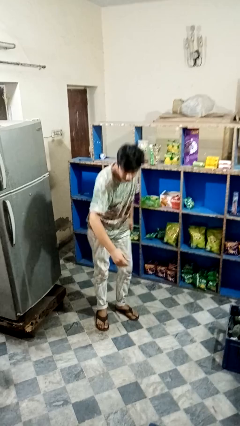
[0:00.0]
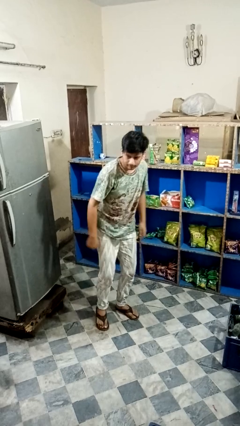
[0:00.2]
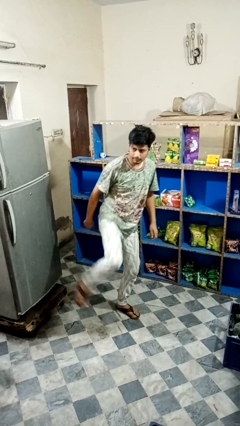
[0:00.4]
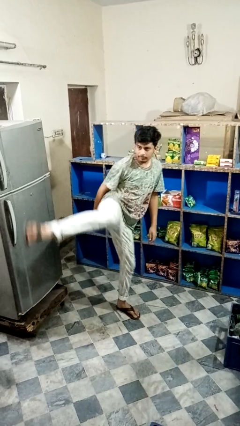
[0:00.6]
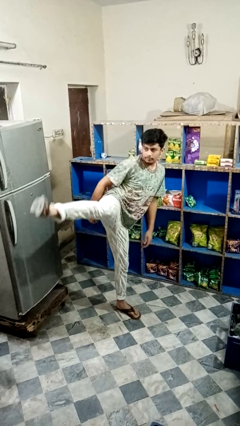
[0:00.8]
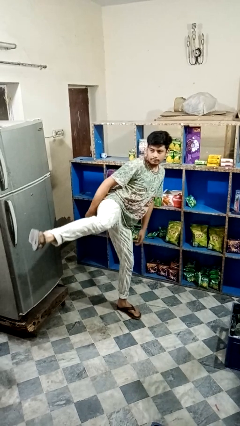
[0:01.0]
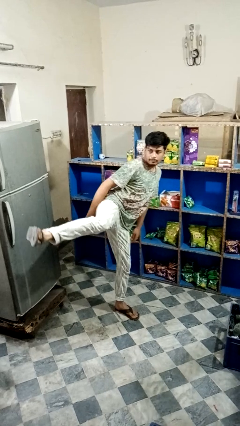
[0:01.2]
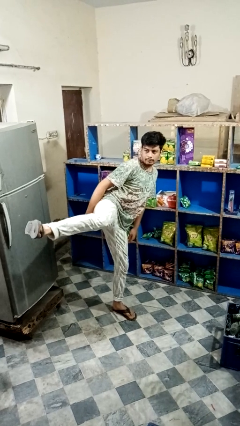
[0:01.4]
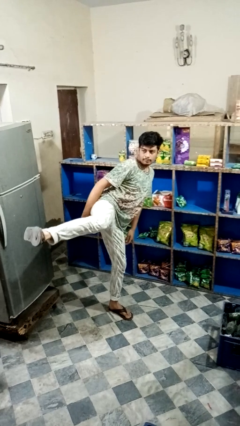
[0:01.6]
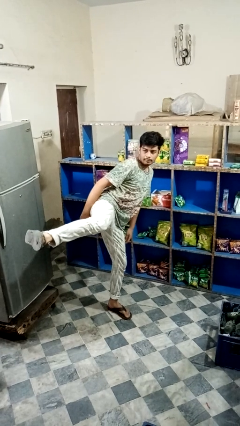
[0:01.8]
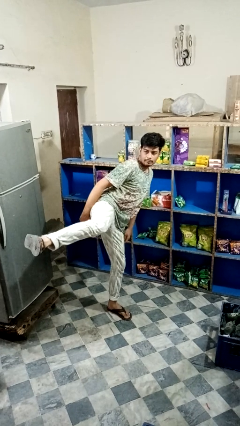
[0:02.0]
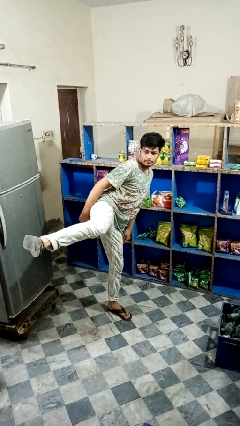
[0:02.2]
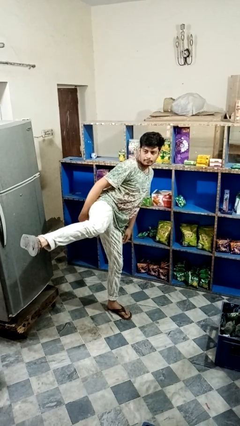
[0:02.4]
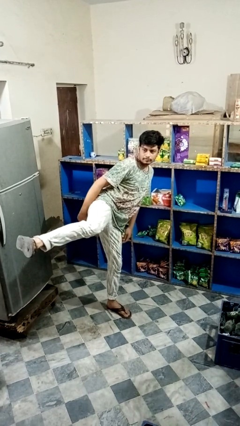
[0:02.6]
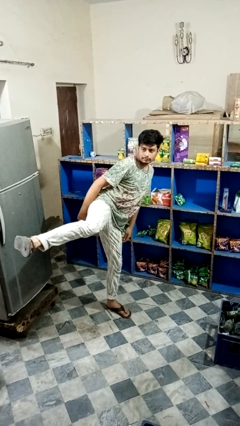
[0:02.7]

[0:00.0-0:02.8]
person karate kicks

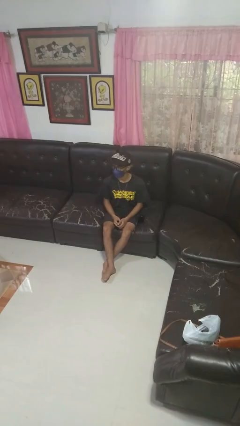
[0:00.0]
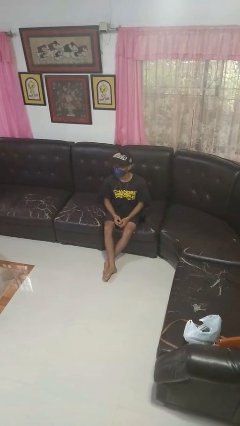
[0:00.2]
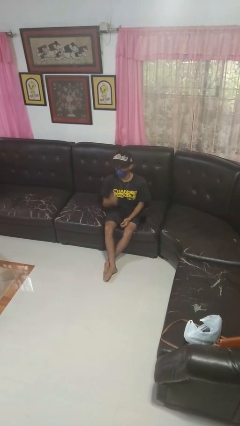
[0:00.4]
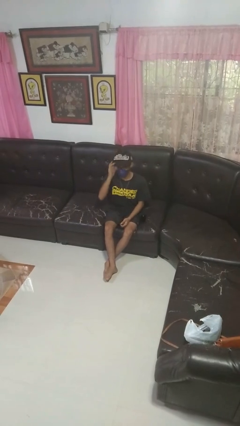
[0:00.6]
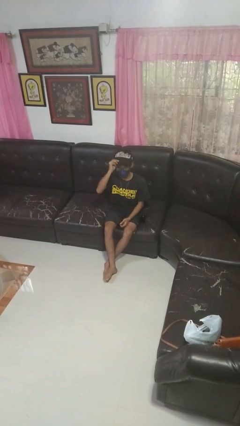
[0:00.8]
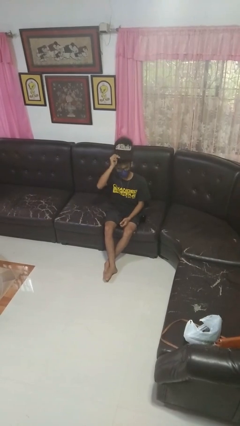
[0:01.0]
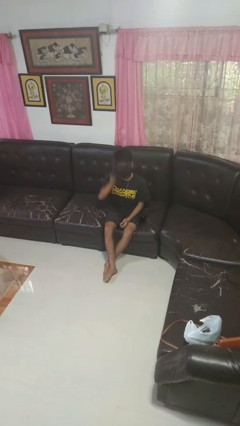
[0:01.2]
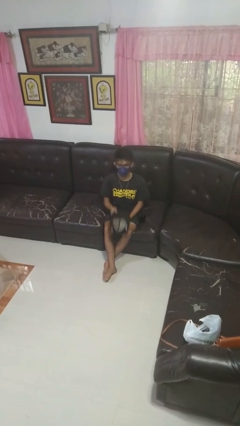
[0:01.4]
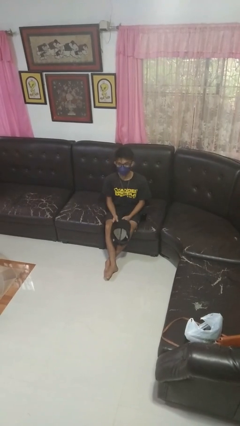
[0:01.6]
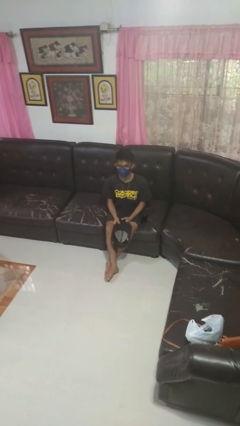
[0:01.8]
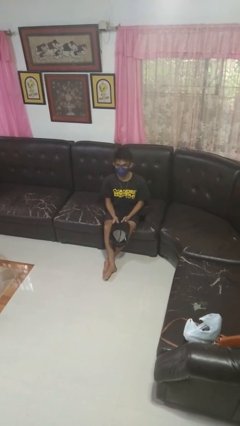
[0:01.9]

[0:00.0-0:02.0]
person takes off hat

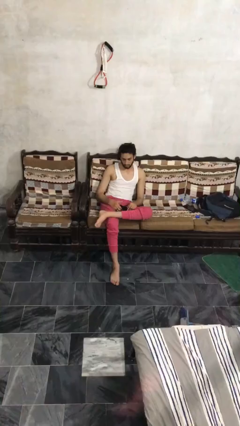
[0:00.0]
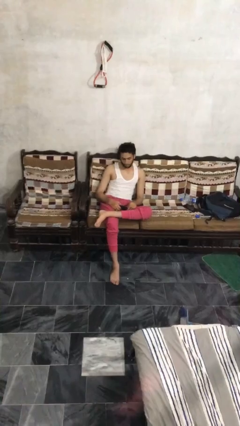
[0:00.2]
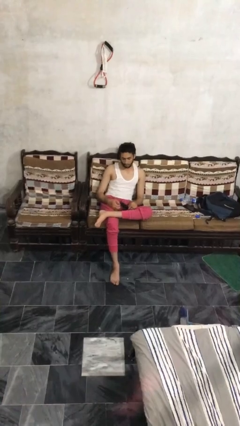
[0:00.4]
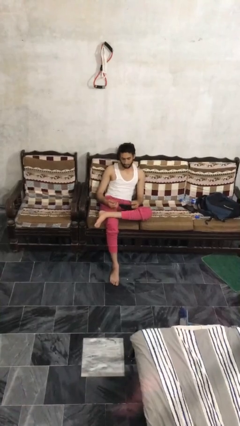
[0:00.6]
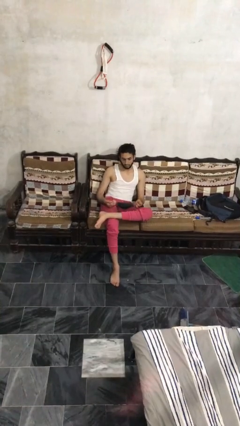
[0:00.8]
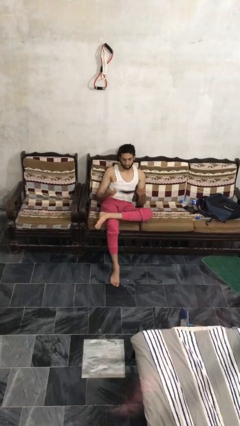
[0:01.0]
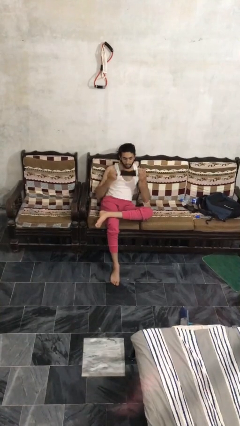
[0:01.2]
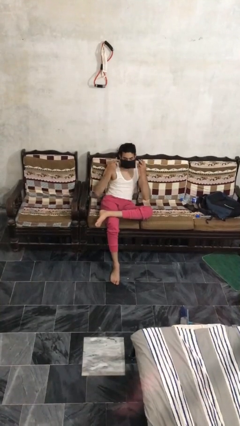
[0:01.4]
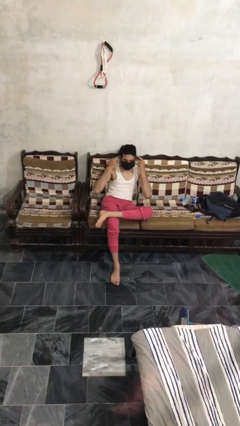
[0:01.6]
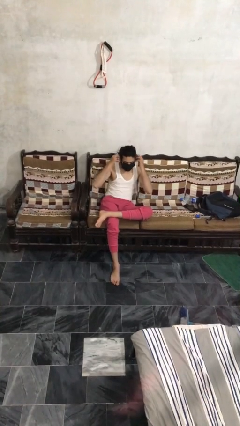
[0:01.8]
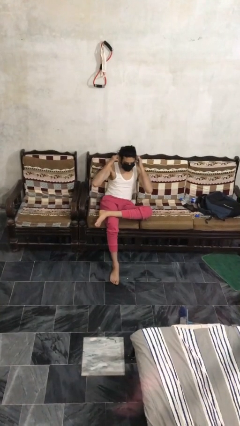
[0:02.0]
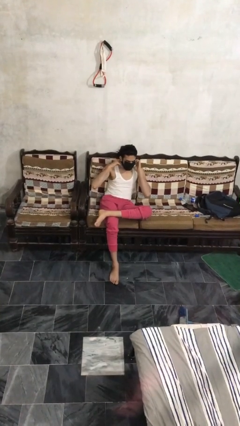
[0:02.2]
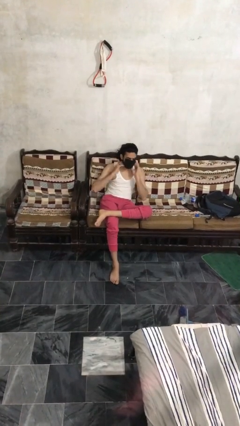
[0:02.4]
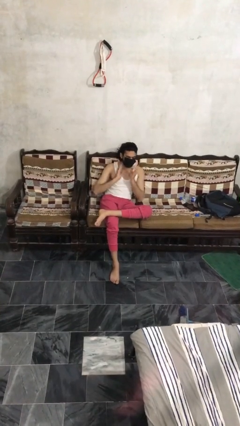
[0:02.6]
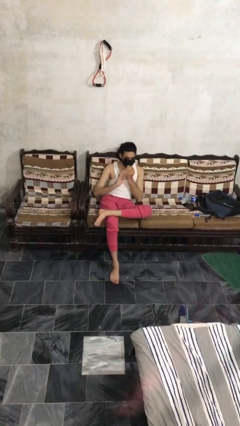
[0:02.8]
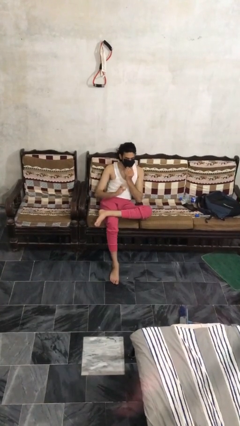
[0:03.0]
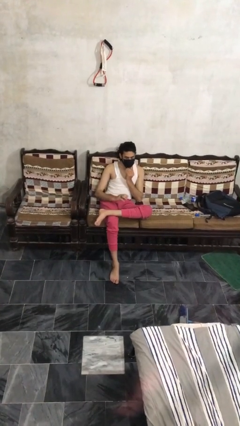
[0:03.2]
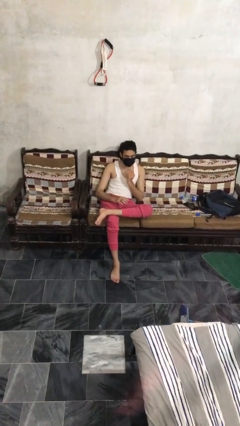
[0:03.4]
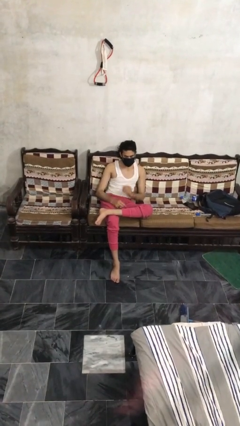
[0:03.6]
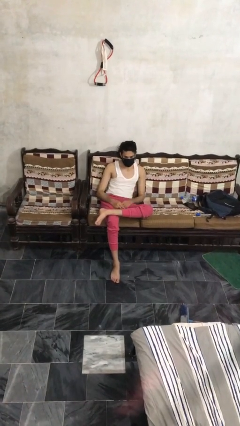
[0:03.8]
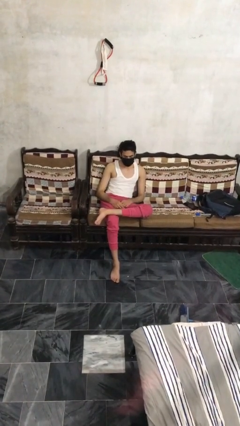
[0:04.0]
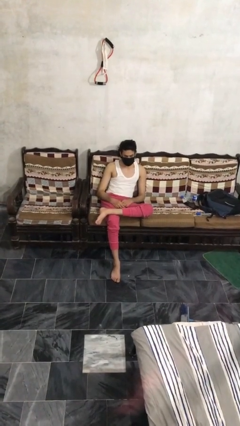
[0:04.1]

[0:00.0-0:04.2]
person puts on facemask

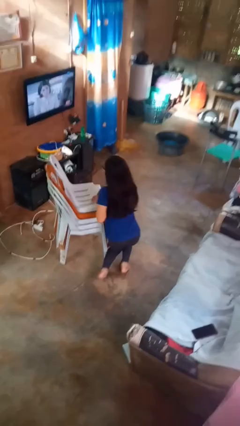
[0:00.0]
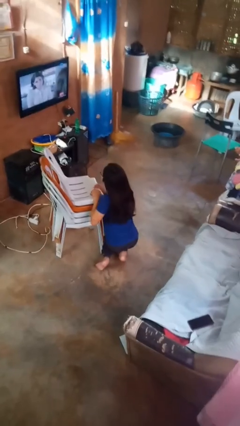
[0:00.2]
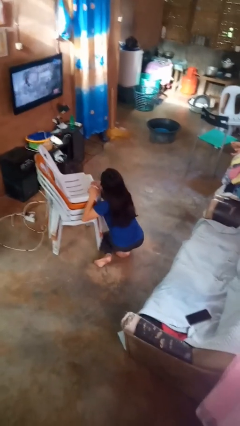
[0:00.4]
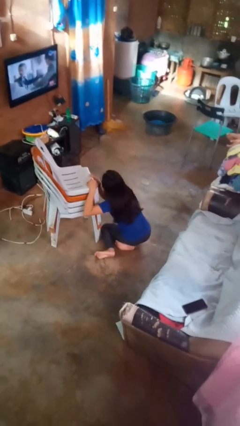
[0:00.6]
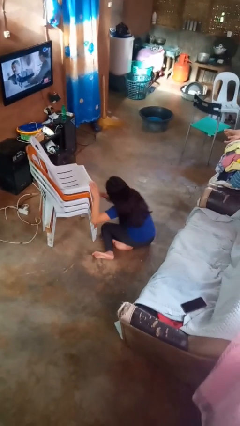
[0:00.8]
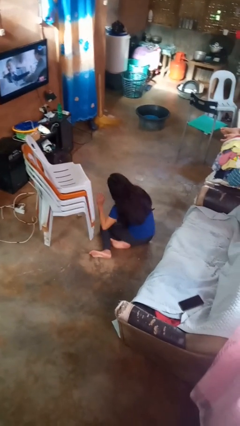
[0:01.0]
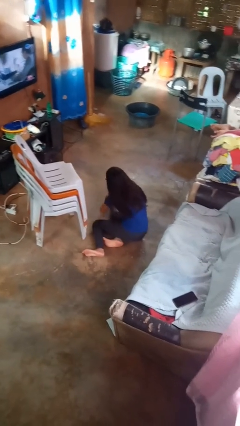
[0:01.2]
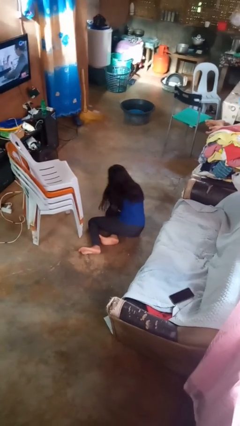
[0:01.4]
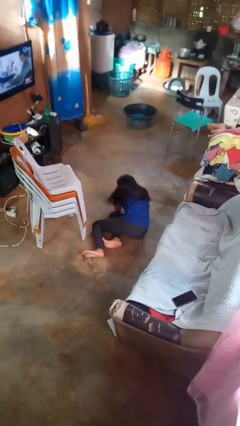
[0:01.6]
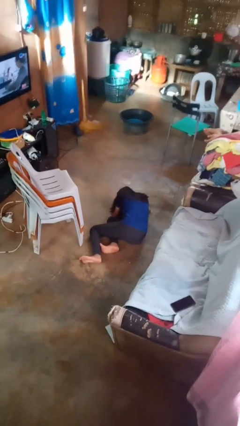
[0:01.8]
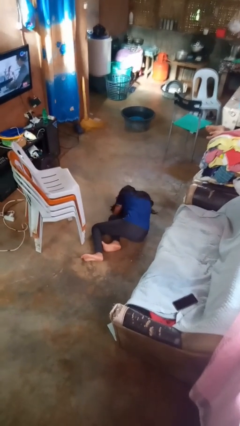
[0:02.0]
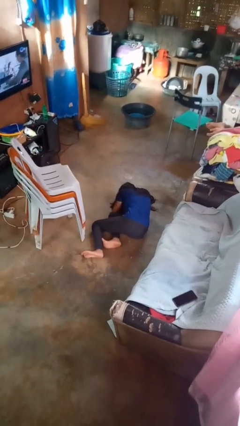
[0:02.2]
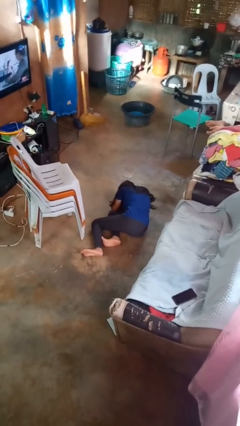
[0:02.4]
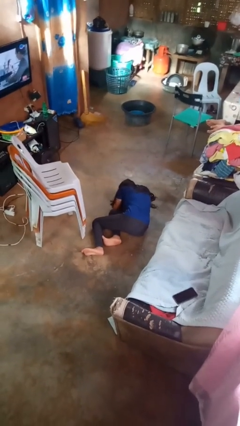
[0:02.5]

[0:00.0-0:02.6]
person lies down on floor

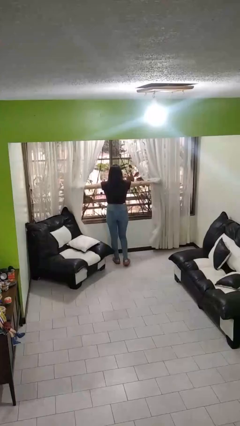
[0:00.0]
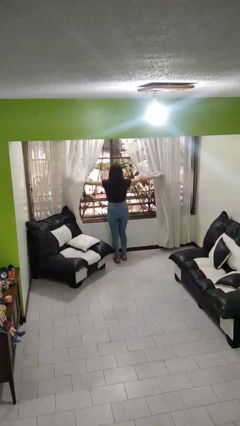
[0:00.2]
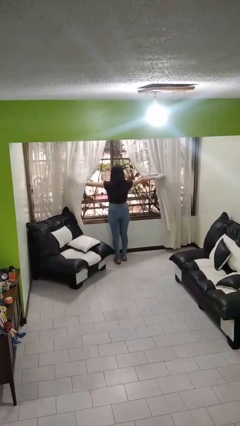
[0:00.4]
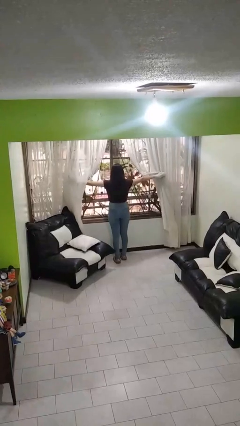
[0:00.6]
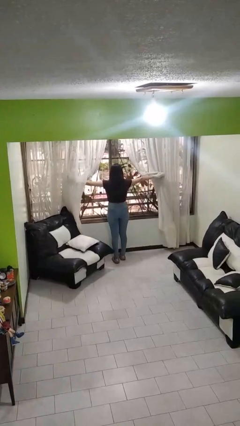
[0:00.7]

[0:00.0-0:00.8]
person opens curtains

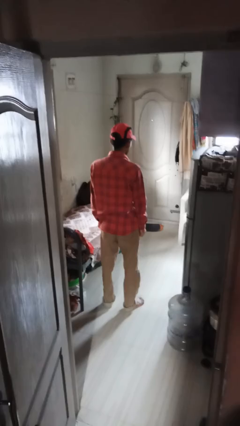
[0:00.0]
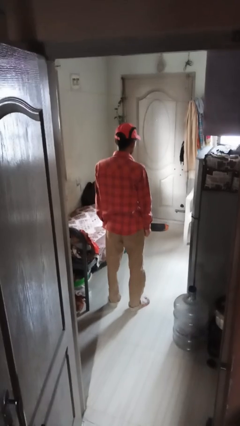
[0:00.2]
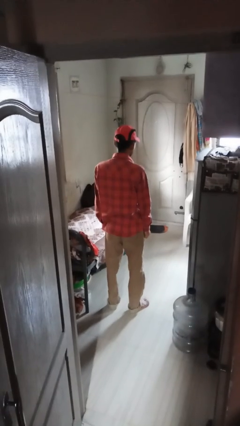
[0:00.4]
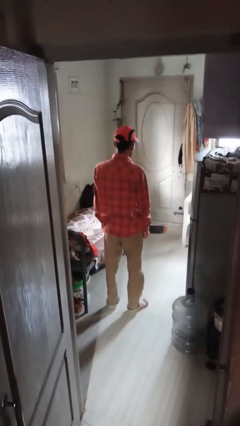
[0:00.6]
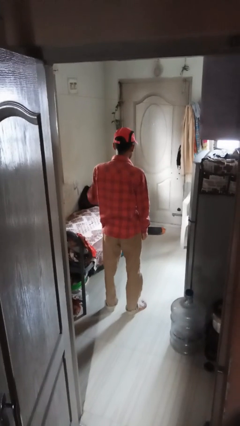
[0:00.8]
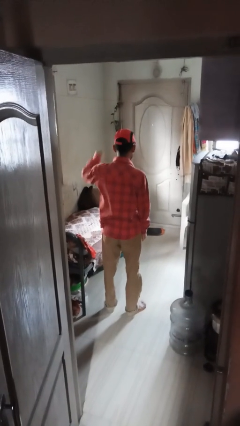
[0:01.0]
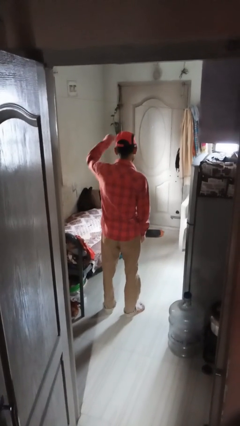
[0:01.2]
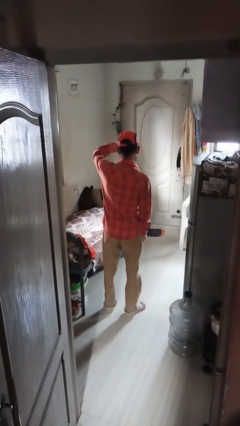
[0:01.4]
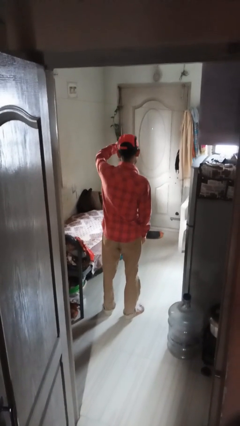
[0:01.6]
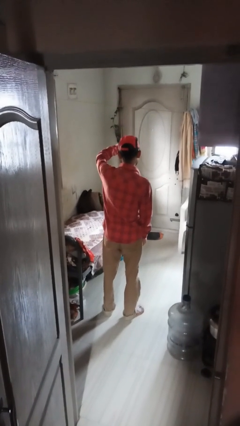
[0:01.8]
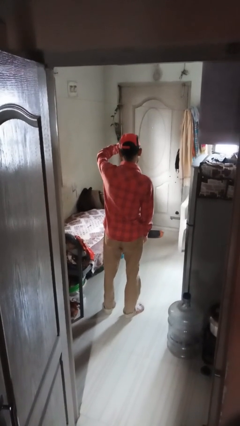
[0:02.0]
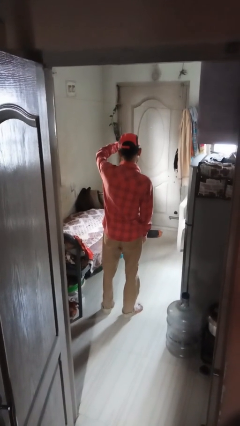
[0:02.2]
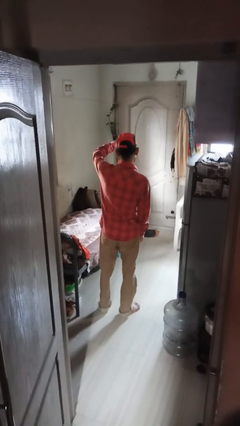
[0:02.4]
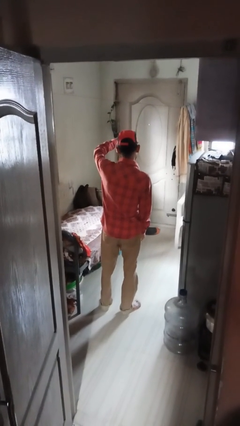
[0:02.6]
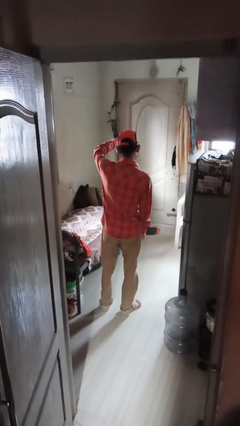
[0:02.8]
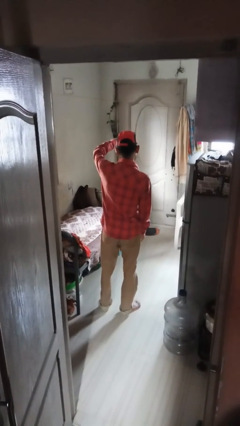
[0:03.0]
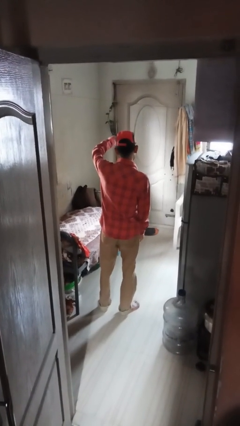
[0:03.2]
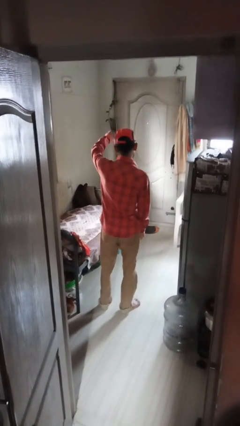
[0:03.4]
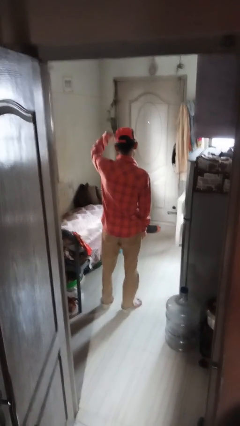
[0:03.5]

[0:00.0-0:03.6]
person gestures thumbs down

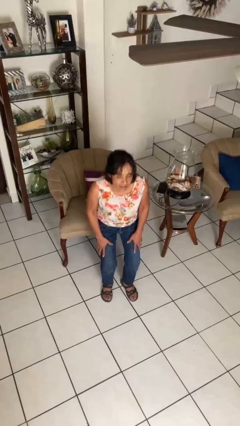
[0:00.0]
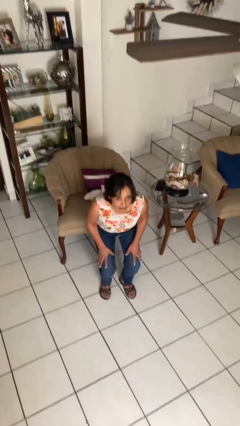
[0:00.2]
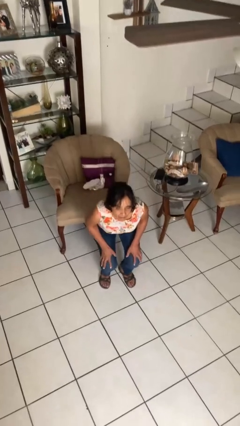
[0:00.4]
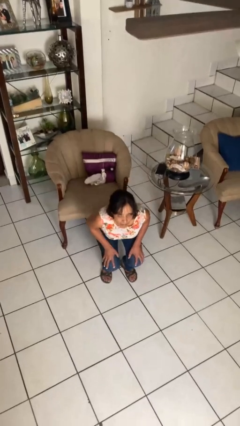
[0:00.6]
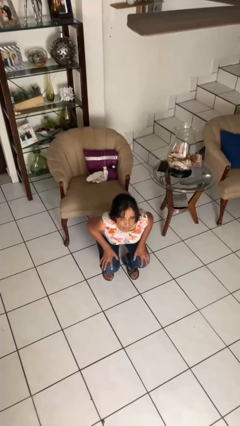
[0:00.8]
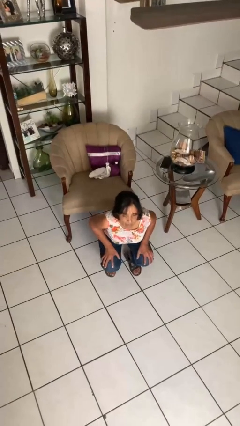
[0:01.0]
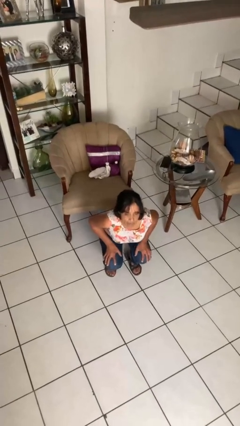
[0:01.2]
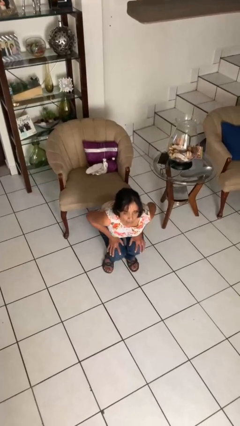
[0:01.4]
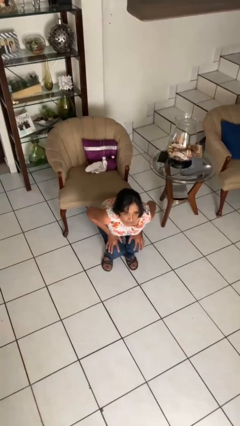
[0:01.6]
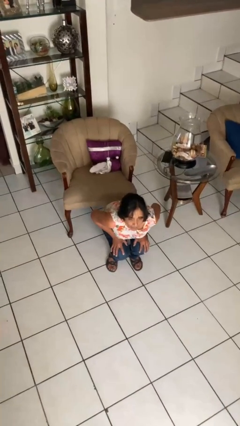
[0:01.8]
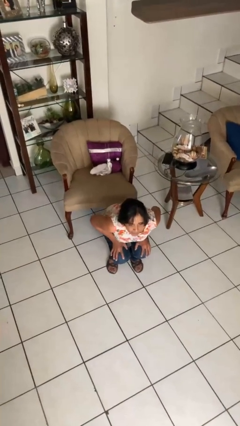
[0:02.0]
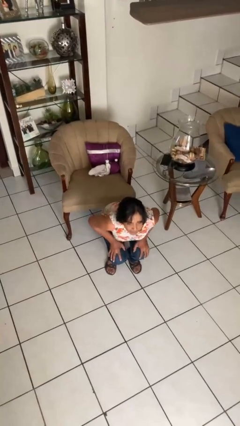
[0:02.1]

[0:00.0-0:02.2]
person squats
